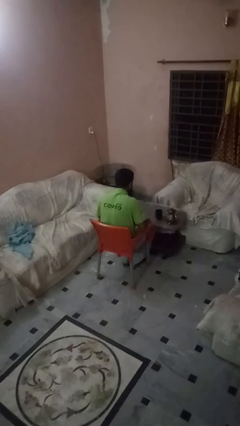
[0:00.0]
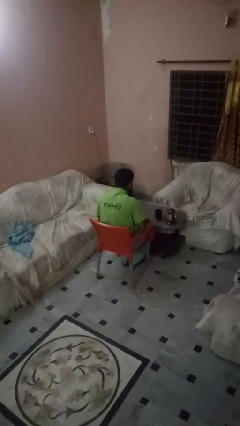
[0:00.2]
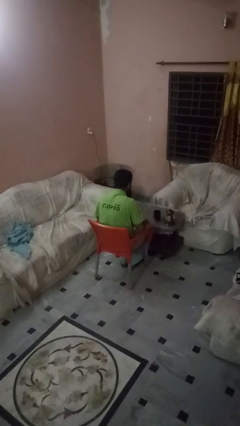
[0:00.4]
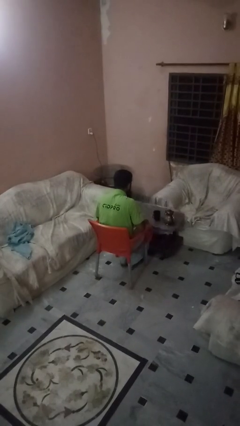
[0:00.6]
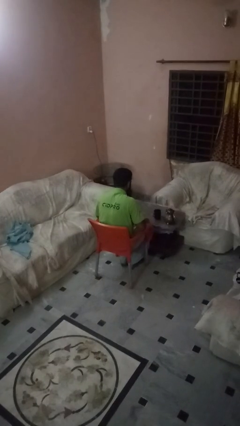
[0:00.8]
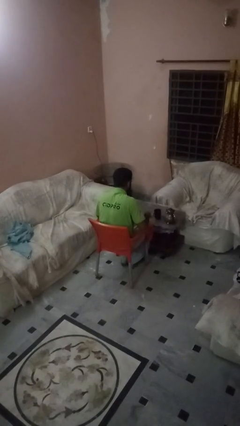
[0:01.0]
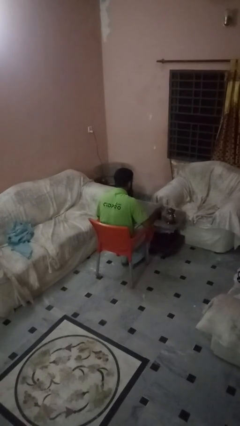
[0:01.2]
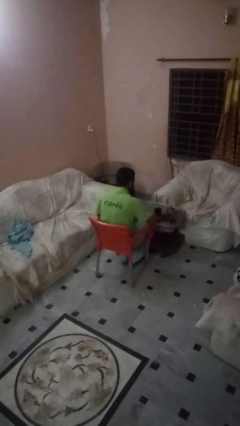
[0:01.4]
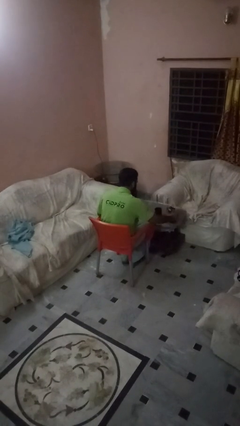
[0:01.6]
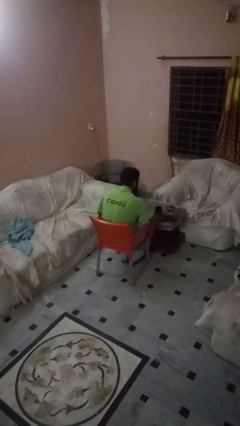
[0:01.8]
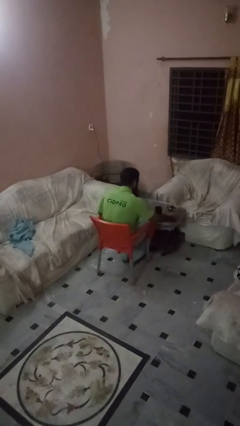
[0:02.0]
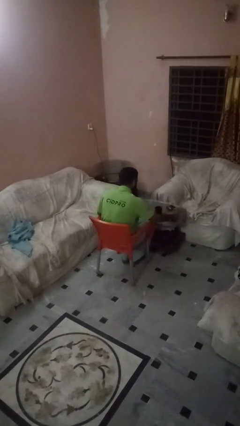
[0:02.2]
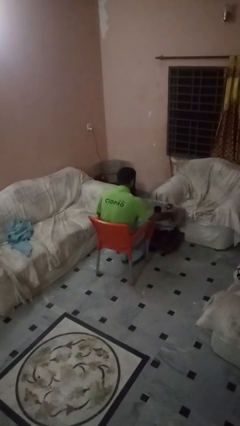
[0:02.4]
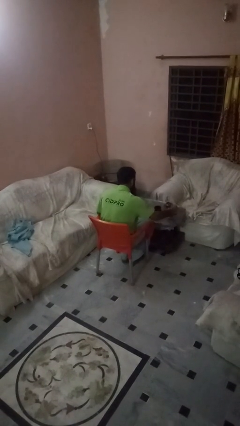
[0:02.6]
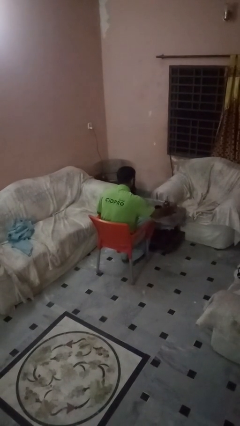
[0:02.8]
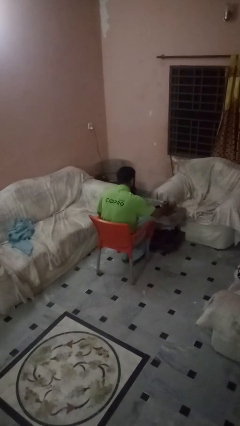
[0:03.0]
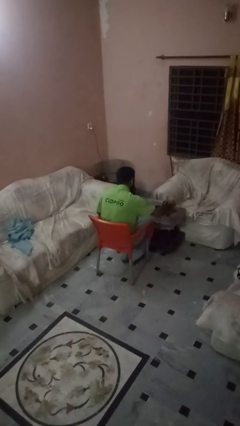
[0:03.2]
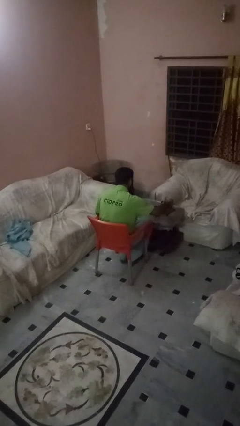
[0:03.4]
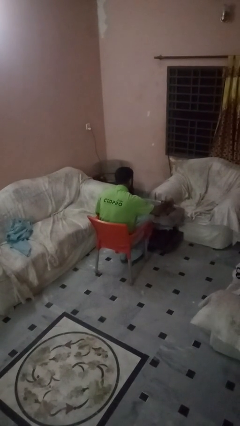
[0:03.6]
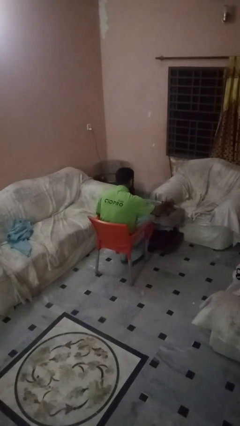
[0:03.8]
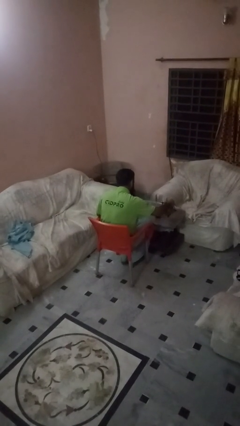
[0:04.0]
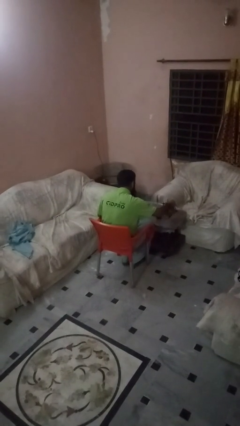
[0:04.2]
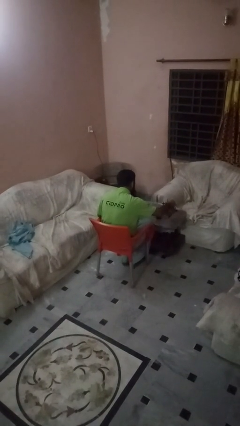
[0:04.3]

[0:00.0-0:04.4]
person pours coffee into mug

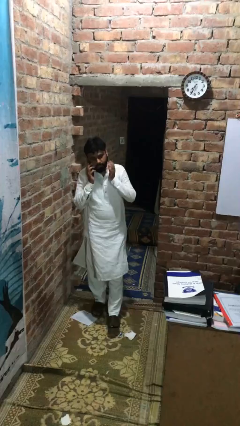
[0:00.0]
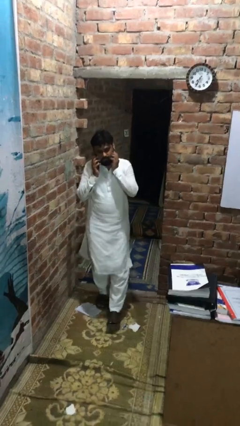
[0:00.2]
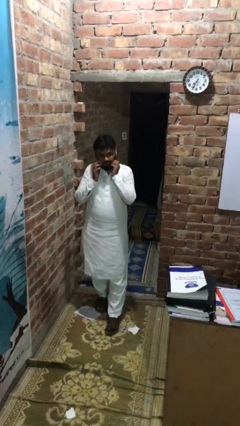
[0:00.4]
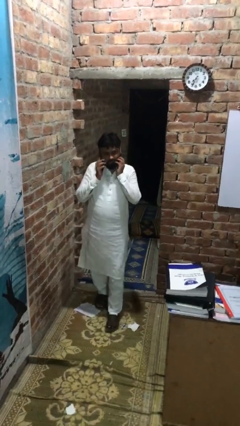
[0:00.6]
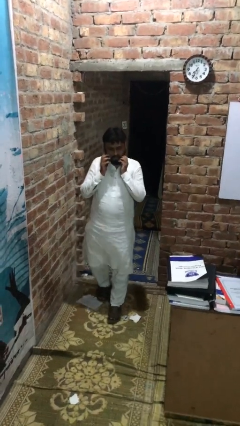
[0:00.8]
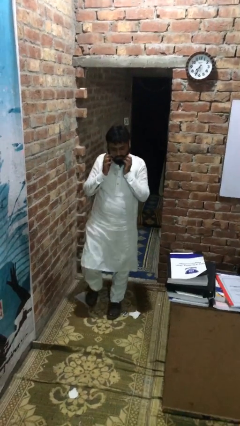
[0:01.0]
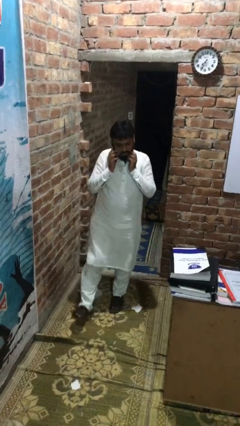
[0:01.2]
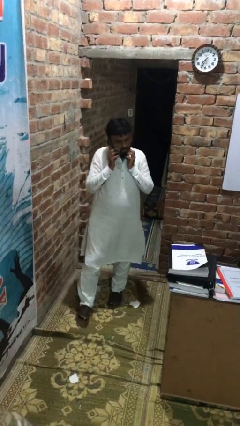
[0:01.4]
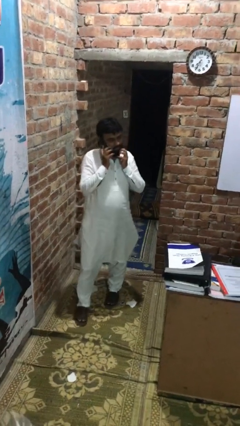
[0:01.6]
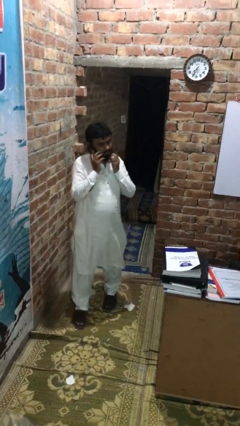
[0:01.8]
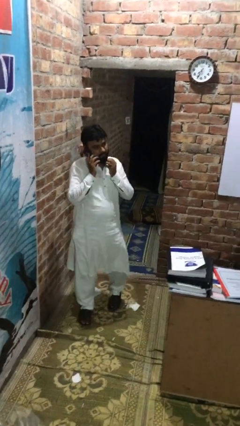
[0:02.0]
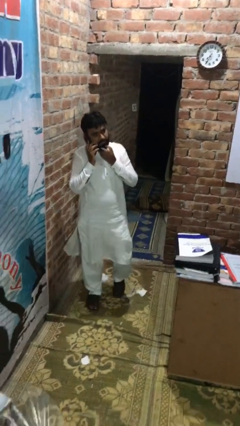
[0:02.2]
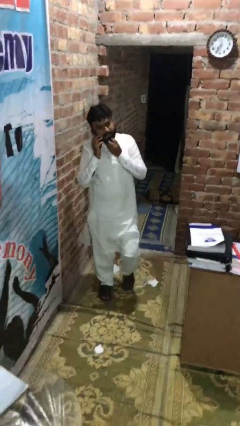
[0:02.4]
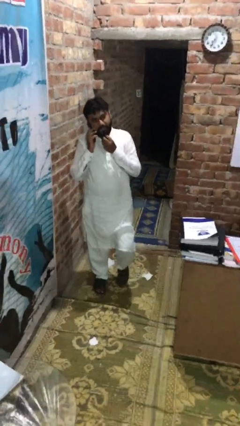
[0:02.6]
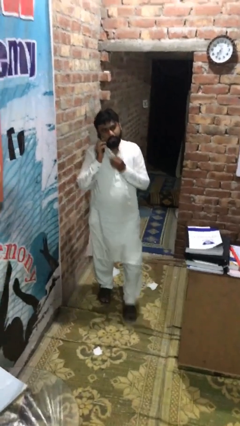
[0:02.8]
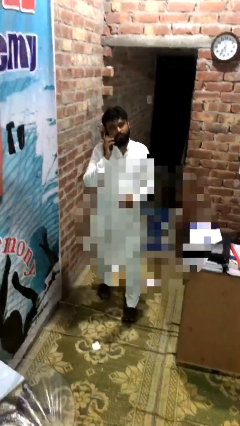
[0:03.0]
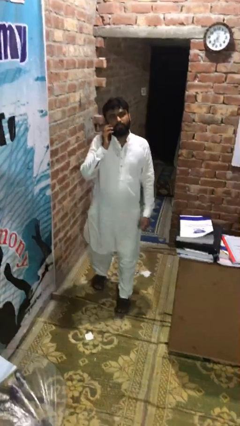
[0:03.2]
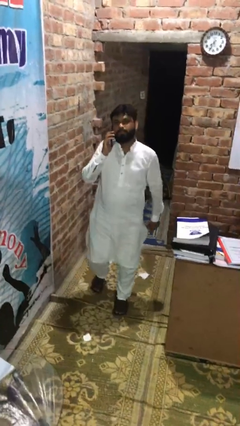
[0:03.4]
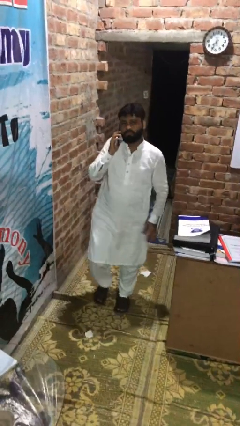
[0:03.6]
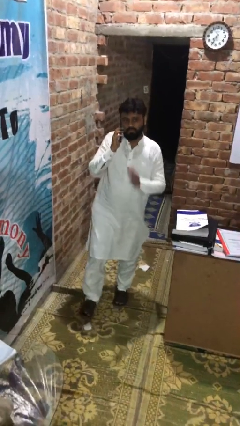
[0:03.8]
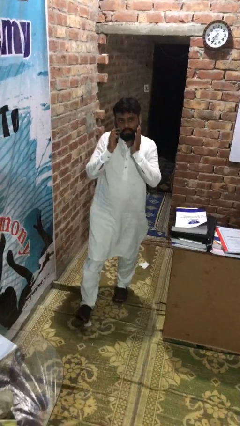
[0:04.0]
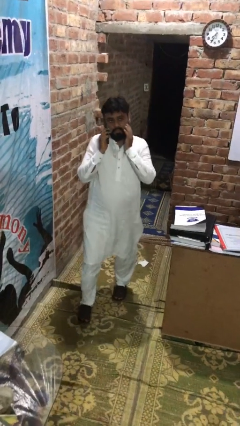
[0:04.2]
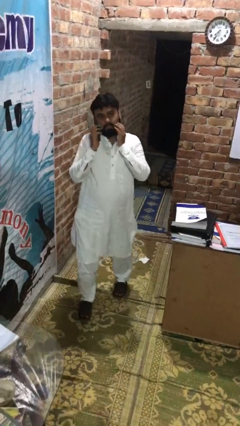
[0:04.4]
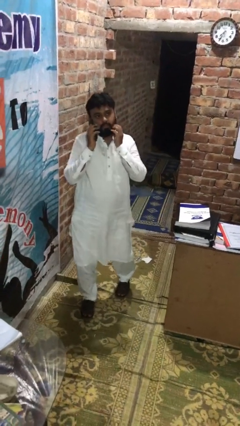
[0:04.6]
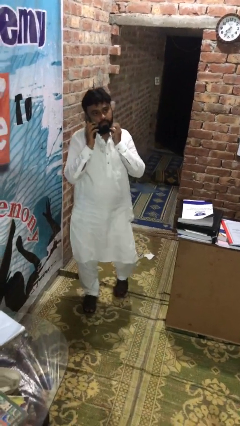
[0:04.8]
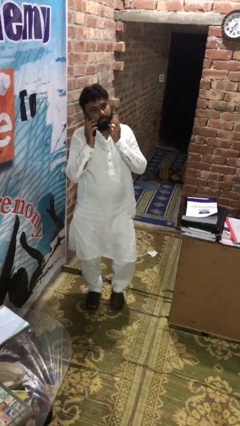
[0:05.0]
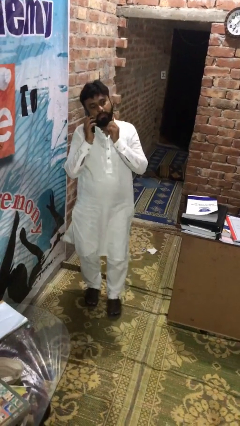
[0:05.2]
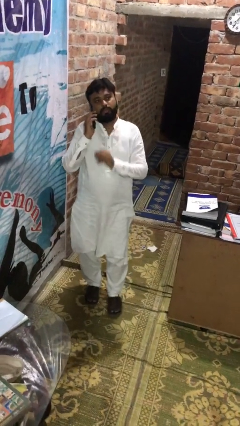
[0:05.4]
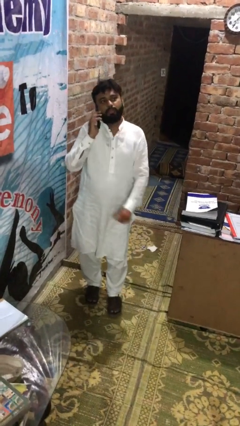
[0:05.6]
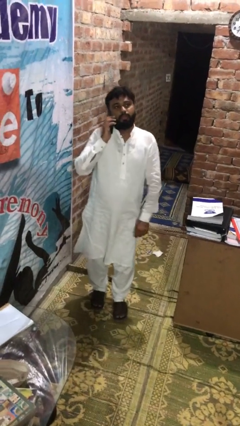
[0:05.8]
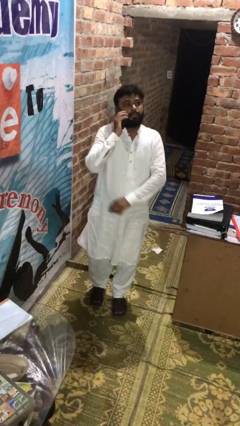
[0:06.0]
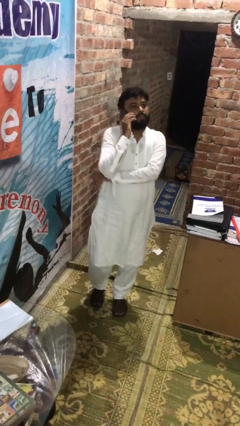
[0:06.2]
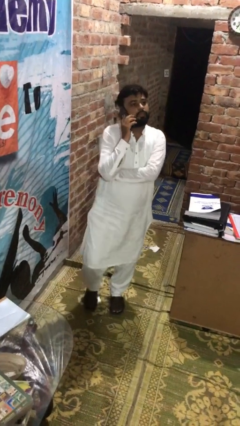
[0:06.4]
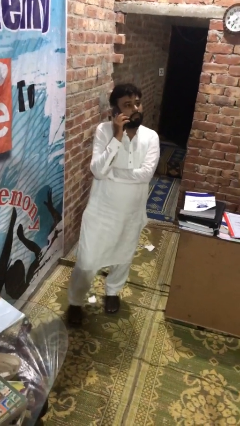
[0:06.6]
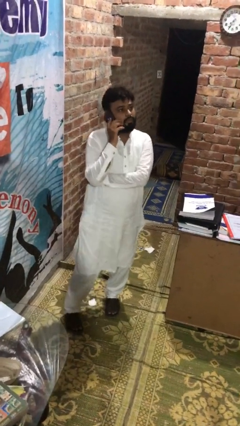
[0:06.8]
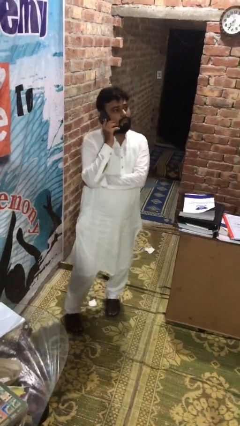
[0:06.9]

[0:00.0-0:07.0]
person talks on phone

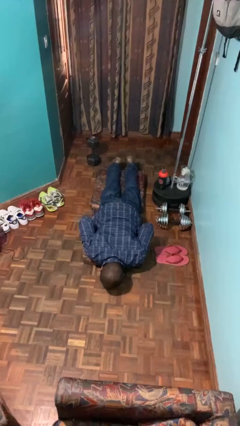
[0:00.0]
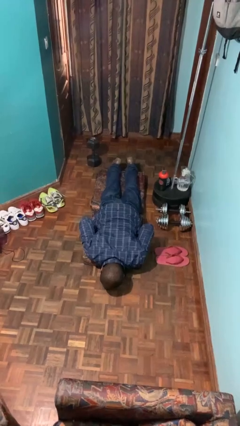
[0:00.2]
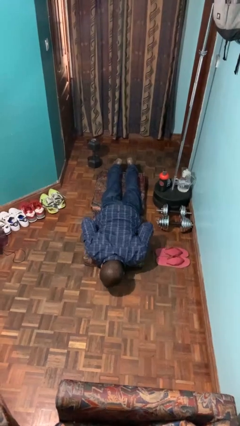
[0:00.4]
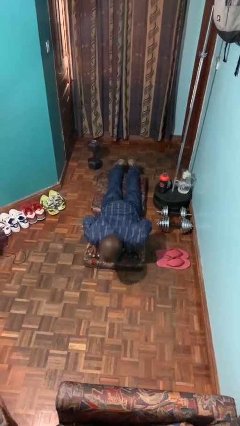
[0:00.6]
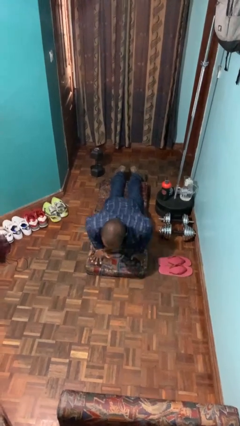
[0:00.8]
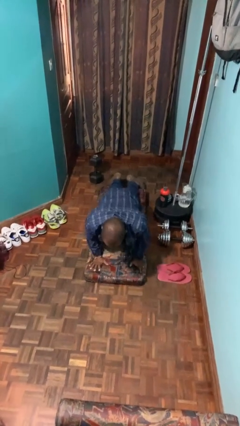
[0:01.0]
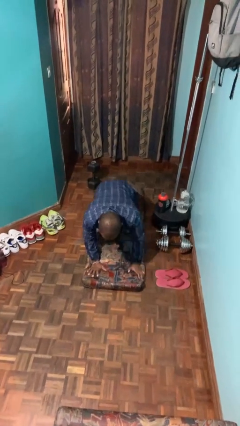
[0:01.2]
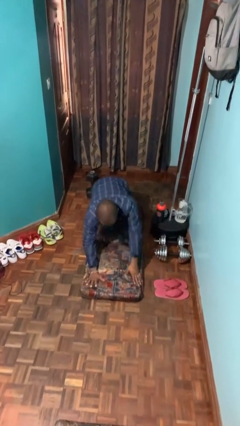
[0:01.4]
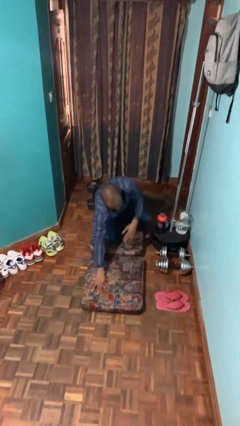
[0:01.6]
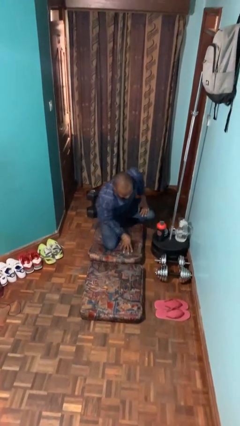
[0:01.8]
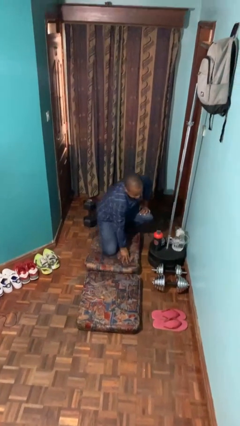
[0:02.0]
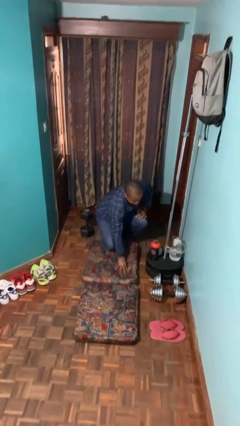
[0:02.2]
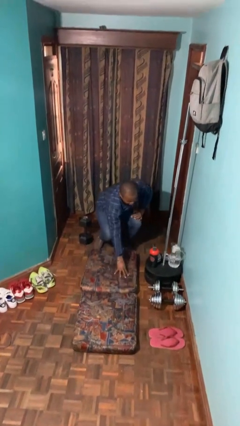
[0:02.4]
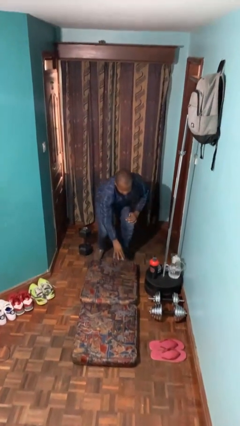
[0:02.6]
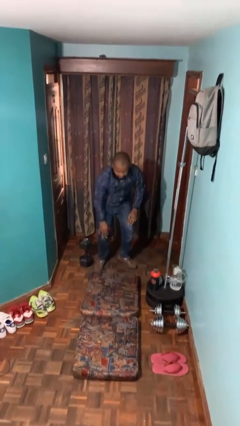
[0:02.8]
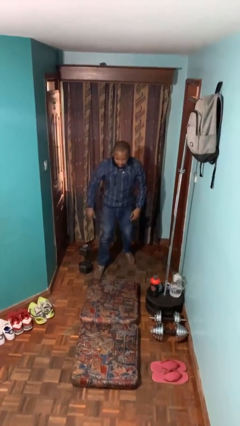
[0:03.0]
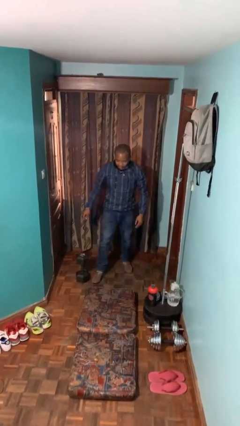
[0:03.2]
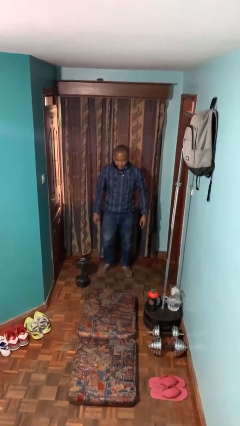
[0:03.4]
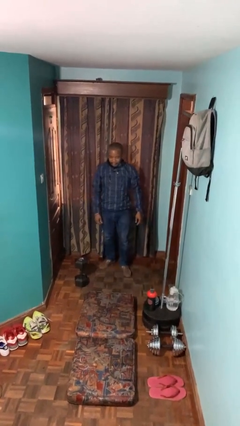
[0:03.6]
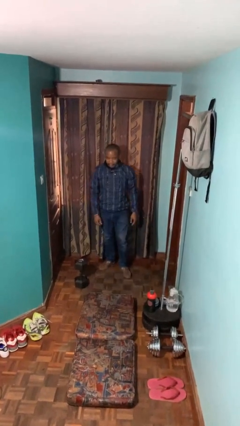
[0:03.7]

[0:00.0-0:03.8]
person stands up from floor

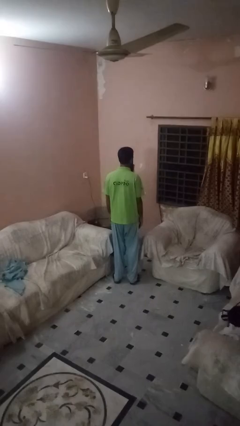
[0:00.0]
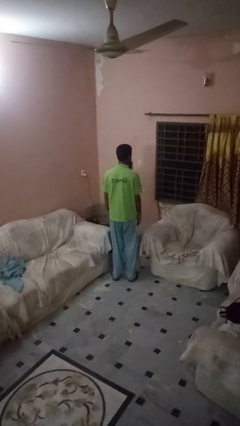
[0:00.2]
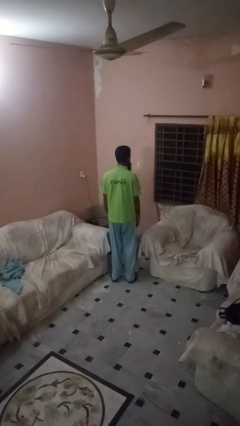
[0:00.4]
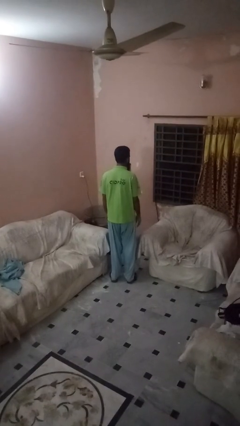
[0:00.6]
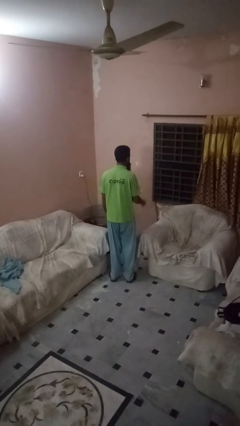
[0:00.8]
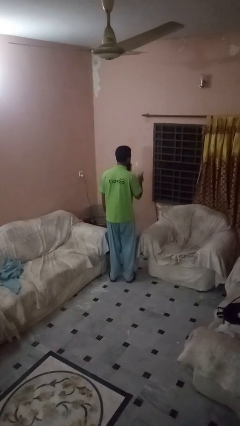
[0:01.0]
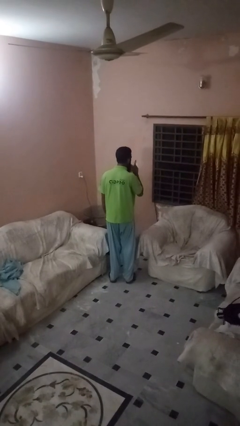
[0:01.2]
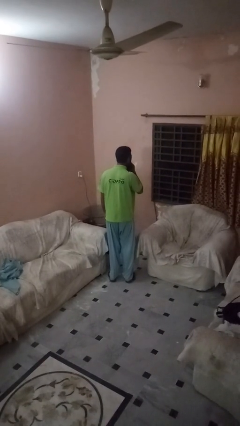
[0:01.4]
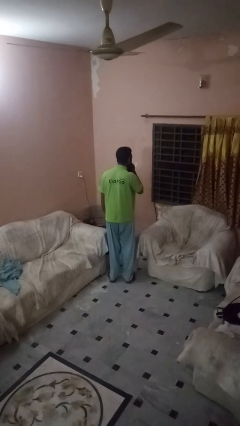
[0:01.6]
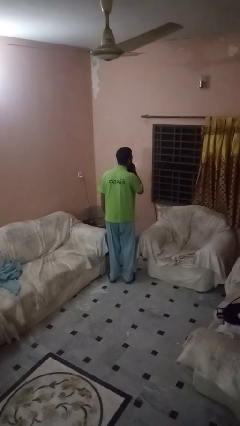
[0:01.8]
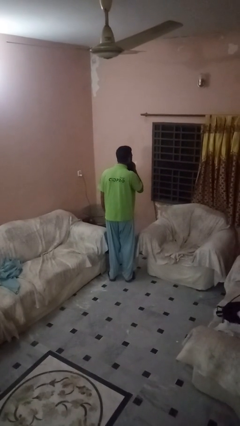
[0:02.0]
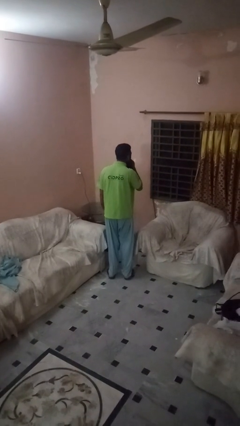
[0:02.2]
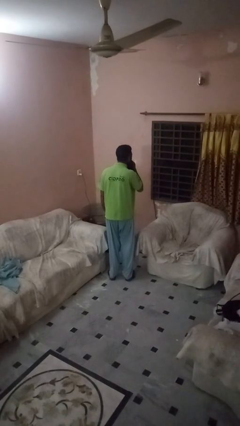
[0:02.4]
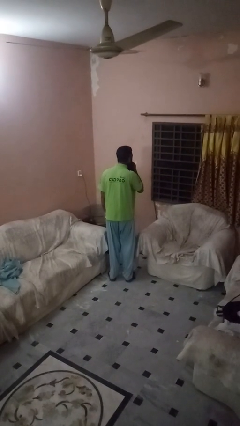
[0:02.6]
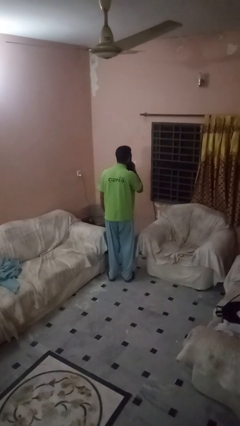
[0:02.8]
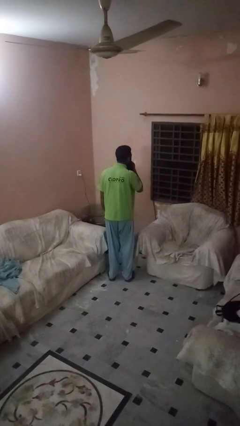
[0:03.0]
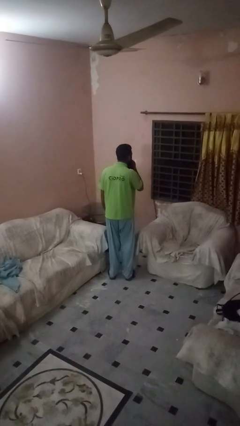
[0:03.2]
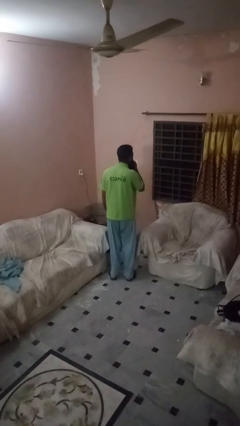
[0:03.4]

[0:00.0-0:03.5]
person gestures be quiet
